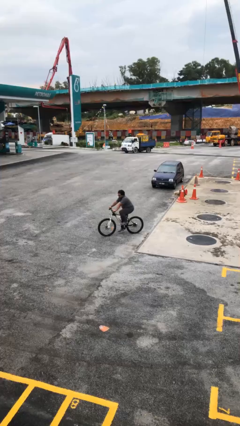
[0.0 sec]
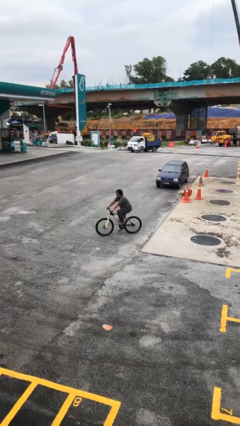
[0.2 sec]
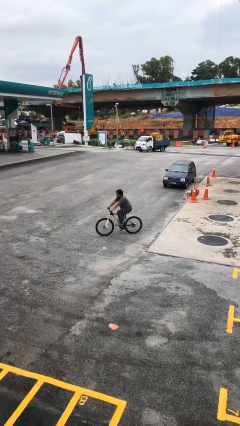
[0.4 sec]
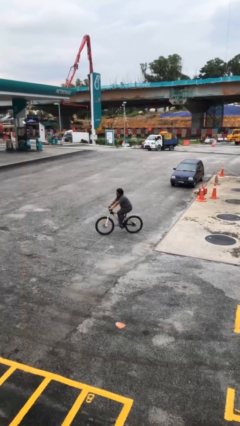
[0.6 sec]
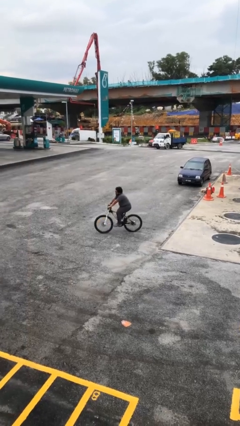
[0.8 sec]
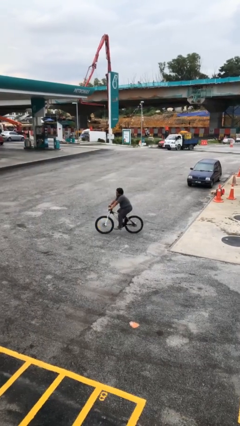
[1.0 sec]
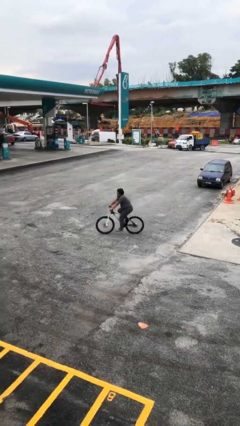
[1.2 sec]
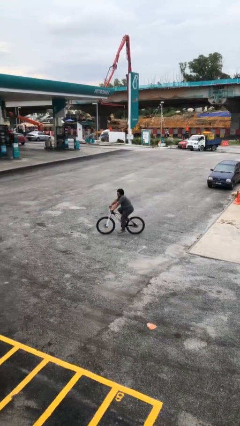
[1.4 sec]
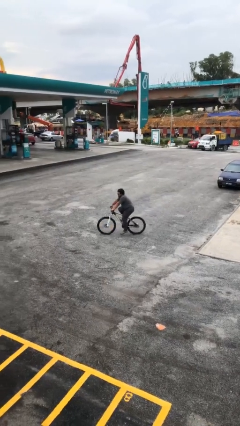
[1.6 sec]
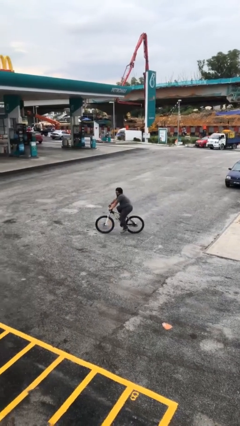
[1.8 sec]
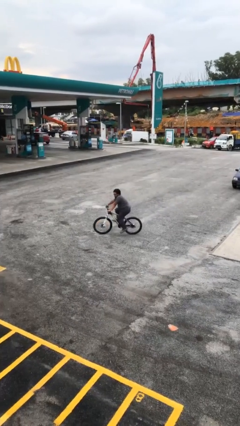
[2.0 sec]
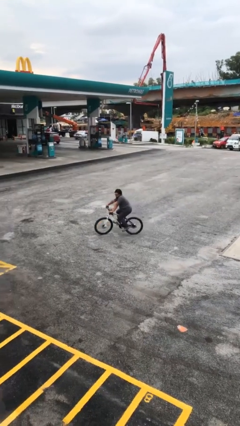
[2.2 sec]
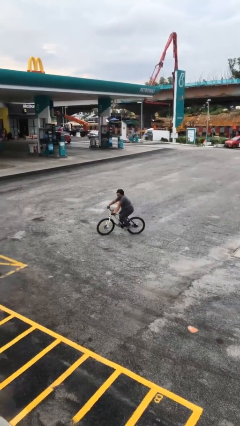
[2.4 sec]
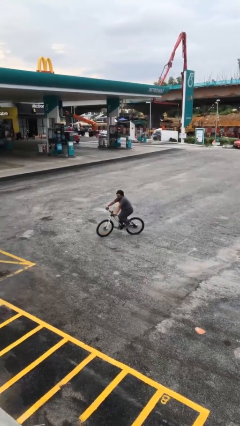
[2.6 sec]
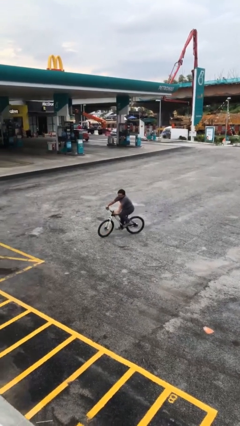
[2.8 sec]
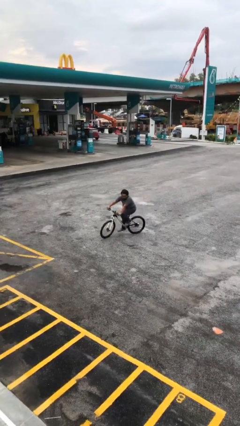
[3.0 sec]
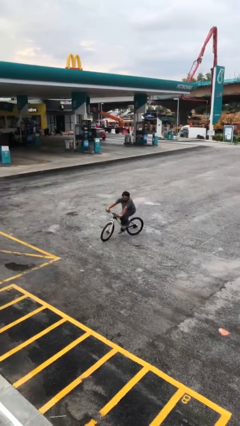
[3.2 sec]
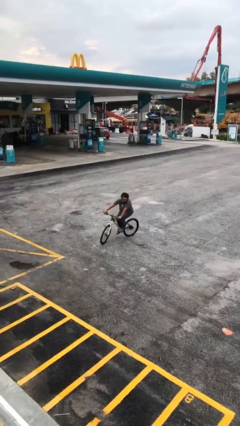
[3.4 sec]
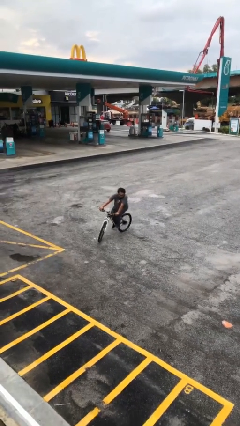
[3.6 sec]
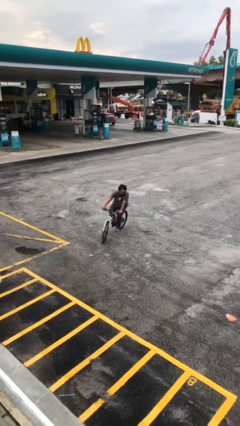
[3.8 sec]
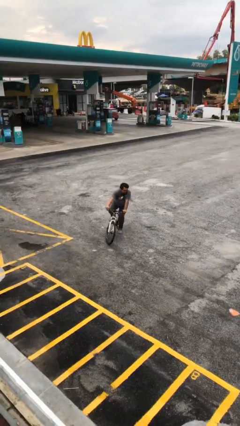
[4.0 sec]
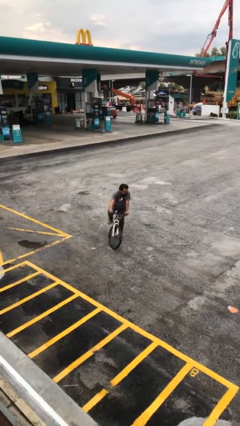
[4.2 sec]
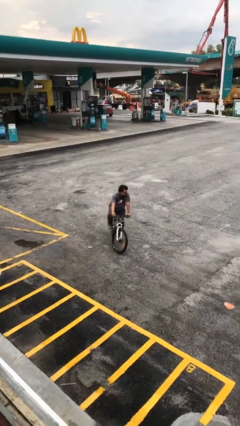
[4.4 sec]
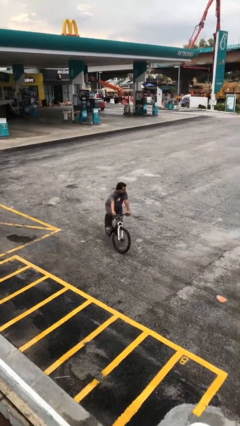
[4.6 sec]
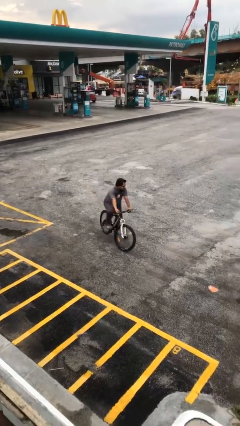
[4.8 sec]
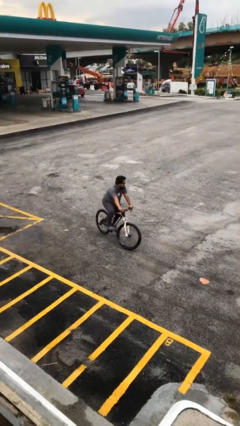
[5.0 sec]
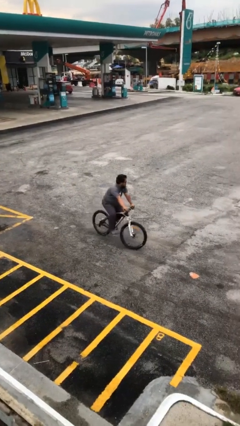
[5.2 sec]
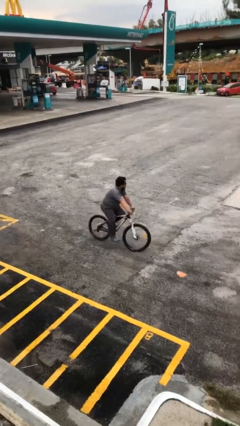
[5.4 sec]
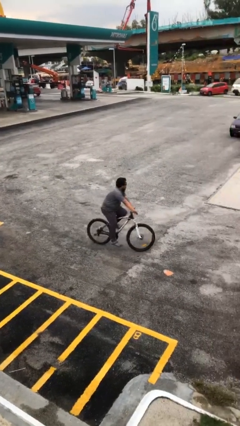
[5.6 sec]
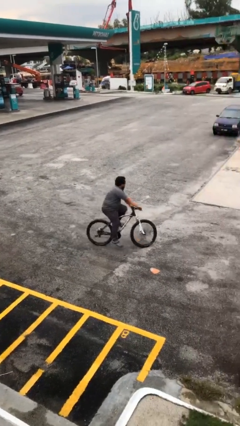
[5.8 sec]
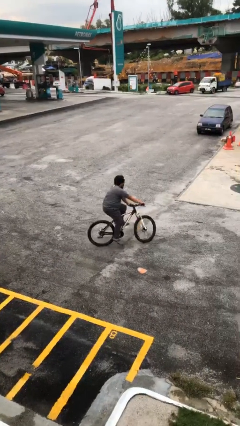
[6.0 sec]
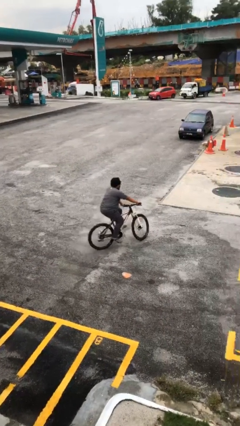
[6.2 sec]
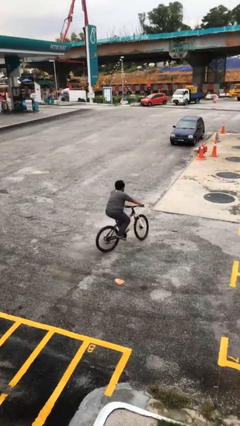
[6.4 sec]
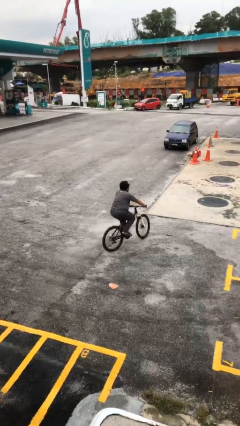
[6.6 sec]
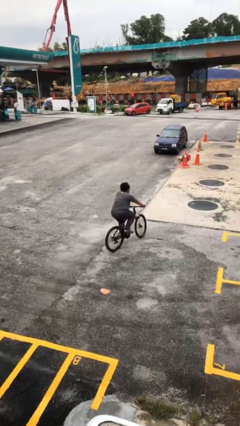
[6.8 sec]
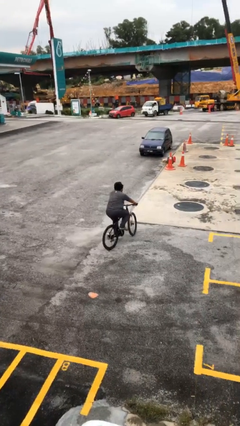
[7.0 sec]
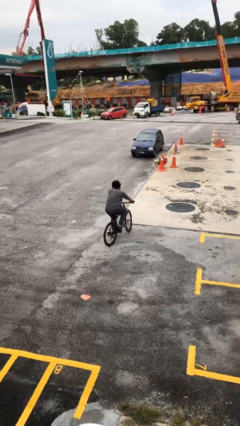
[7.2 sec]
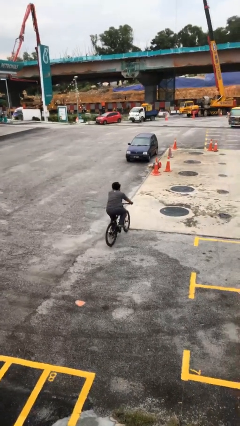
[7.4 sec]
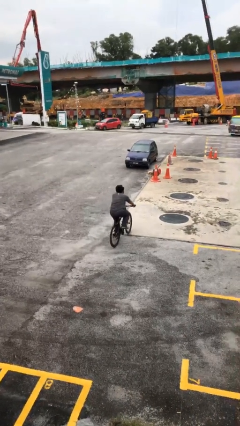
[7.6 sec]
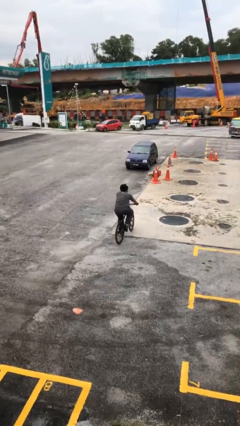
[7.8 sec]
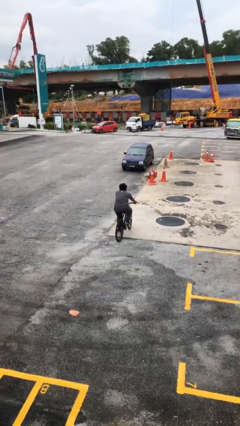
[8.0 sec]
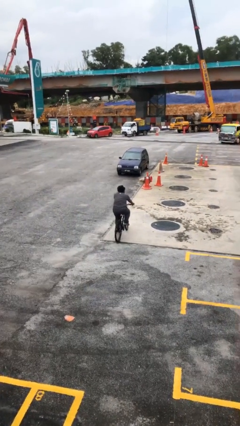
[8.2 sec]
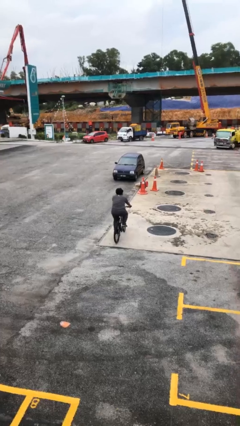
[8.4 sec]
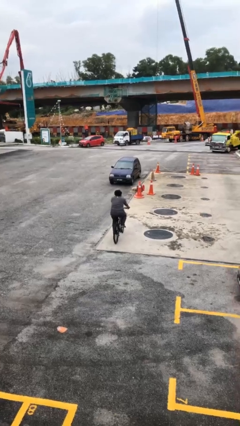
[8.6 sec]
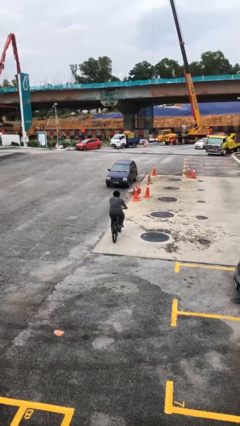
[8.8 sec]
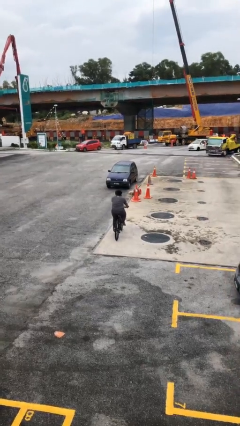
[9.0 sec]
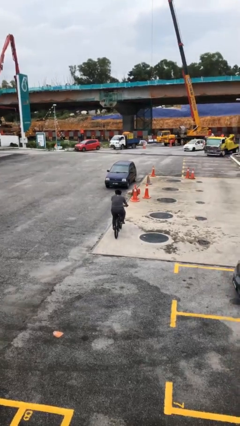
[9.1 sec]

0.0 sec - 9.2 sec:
person rides bicycle

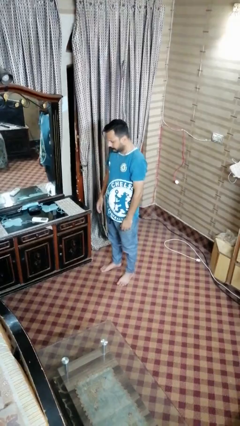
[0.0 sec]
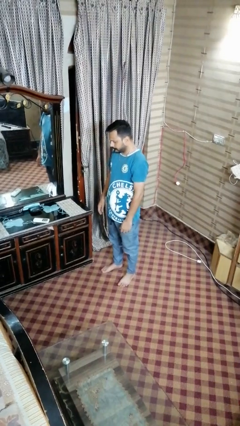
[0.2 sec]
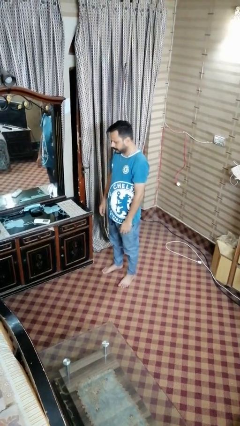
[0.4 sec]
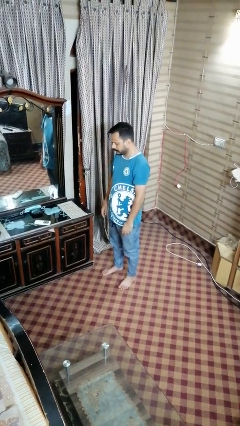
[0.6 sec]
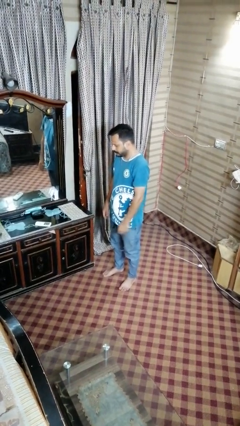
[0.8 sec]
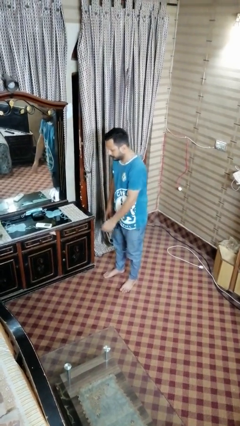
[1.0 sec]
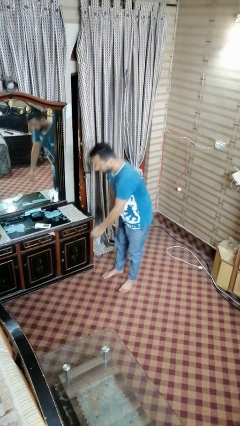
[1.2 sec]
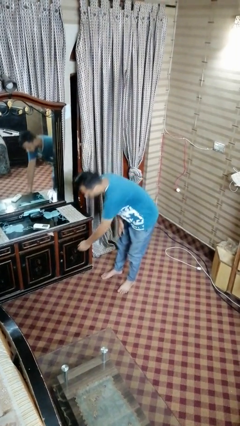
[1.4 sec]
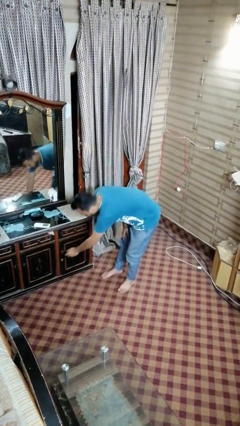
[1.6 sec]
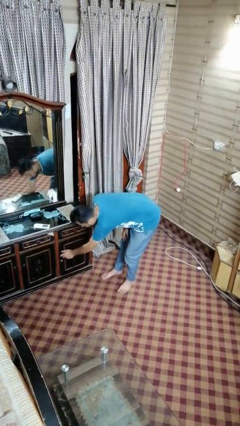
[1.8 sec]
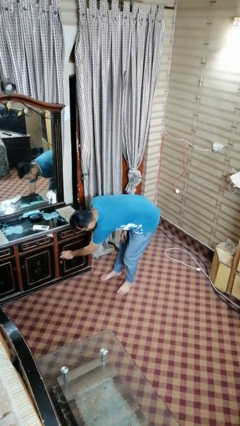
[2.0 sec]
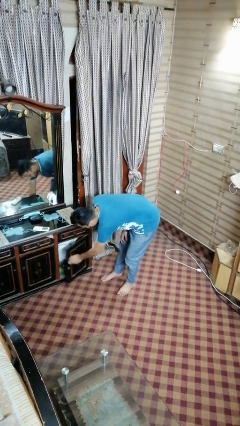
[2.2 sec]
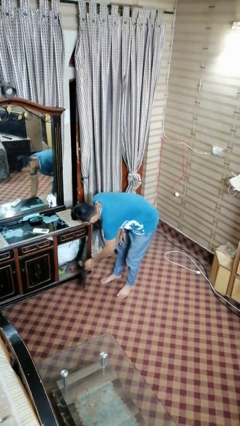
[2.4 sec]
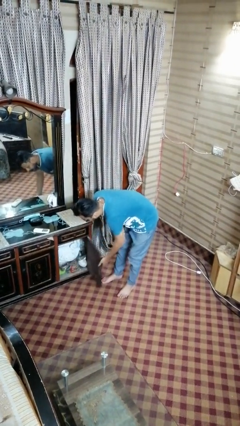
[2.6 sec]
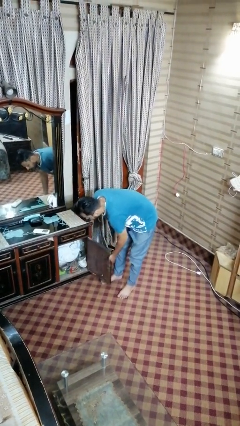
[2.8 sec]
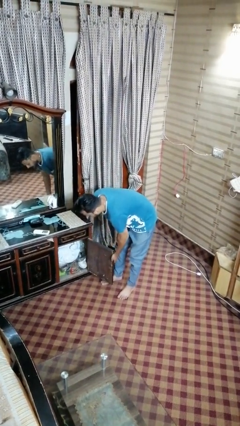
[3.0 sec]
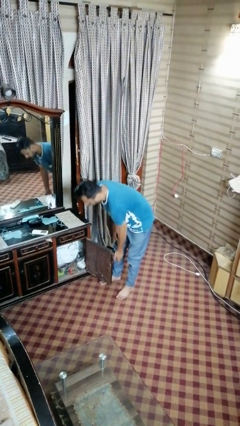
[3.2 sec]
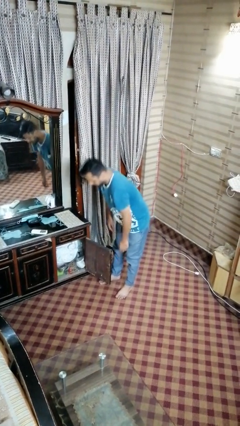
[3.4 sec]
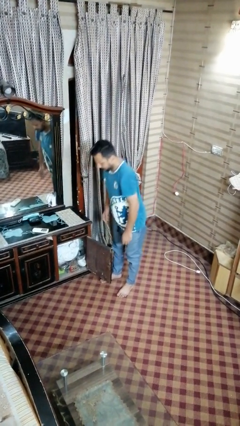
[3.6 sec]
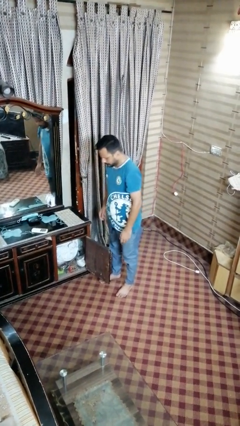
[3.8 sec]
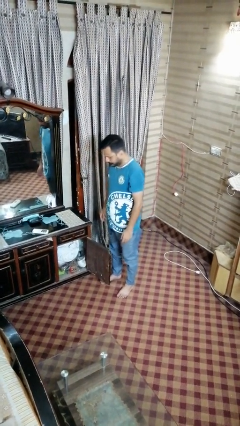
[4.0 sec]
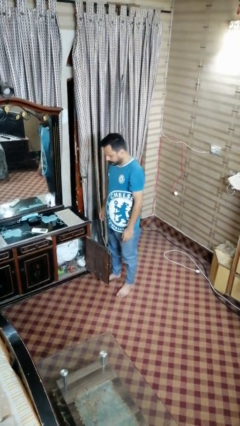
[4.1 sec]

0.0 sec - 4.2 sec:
person opens dresser drawer

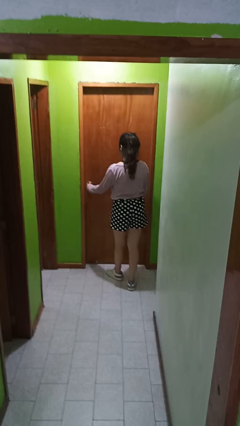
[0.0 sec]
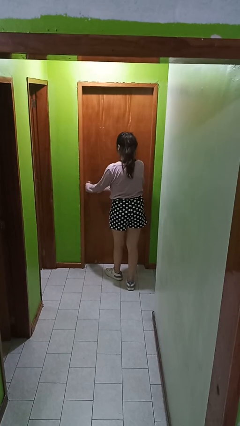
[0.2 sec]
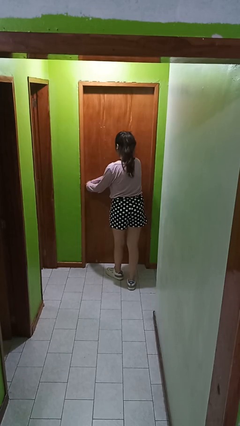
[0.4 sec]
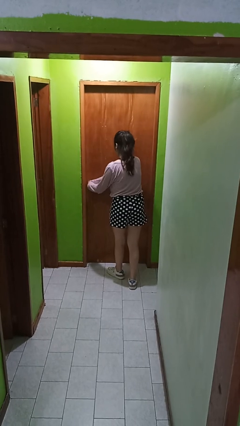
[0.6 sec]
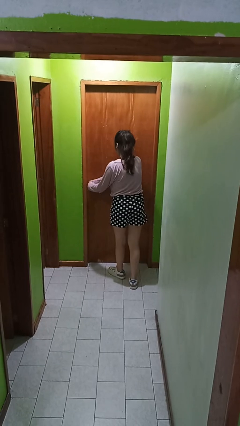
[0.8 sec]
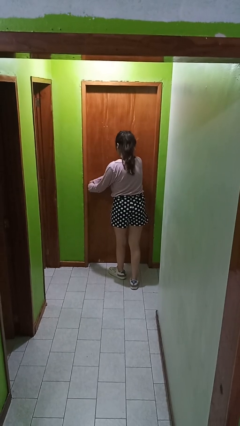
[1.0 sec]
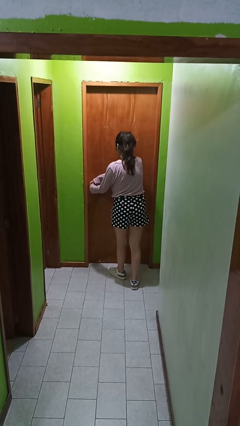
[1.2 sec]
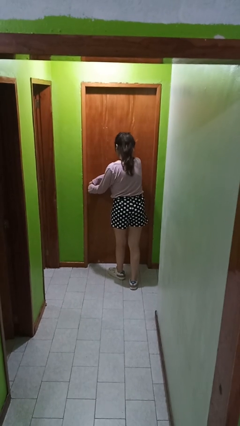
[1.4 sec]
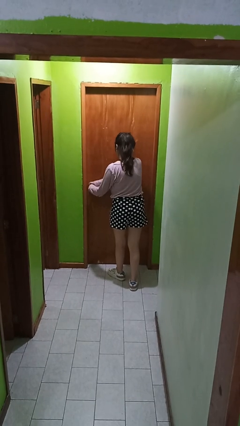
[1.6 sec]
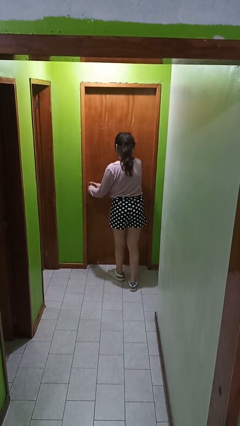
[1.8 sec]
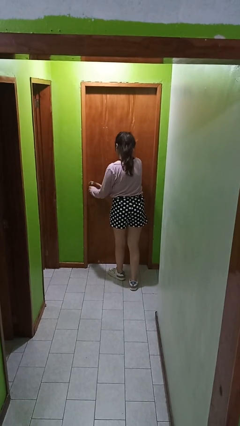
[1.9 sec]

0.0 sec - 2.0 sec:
person locks door with keys

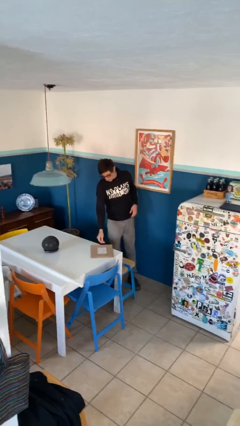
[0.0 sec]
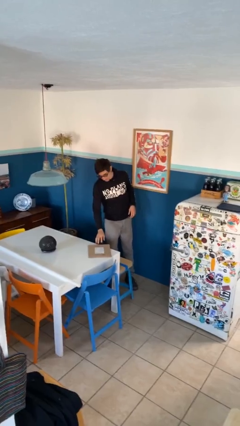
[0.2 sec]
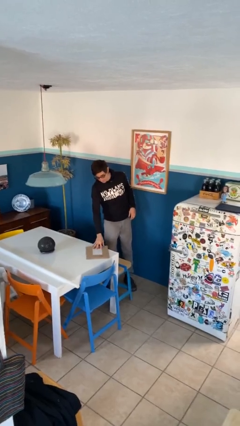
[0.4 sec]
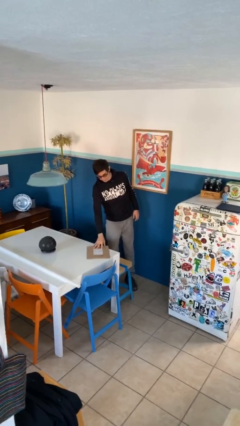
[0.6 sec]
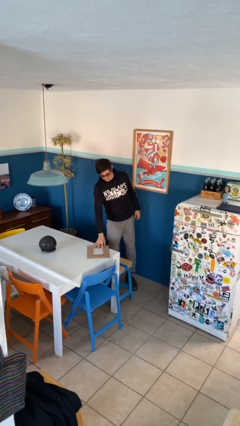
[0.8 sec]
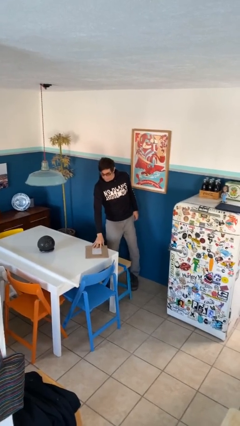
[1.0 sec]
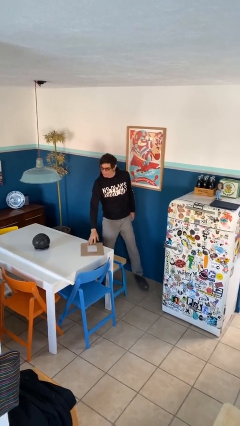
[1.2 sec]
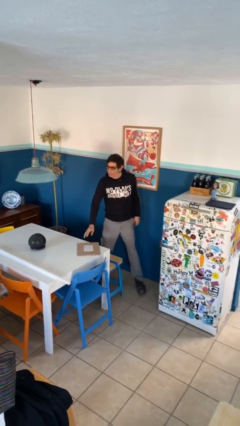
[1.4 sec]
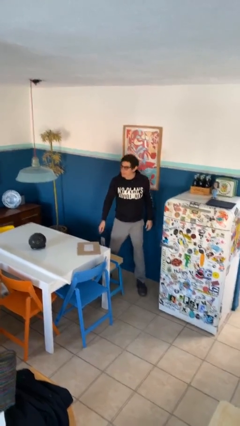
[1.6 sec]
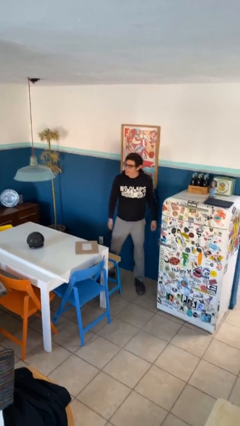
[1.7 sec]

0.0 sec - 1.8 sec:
person puts down object on table

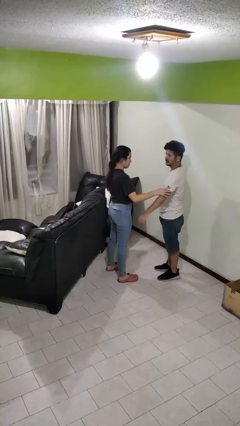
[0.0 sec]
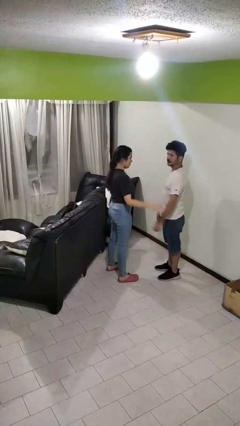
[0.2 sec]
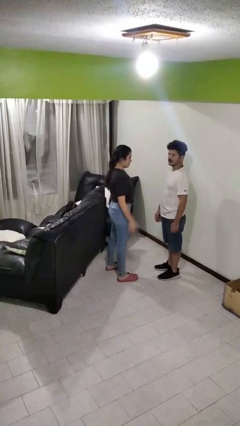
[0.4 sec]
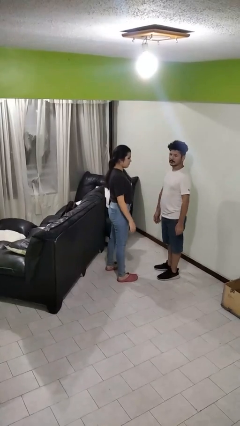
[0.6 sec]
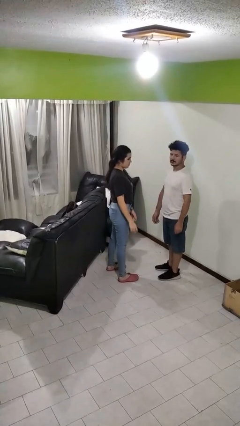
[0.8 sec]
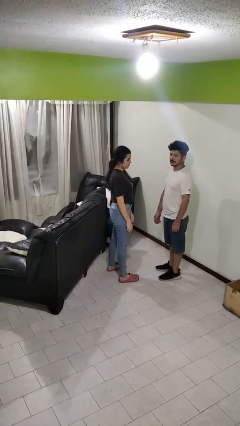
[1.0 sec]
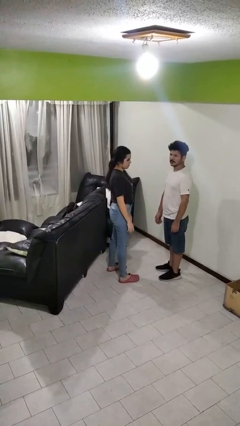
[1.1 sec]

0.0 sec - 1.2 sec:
person grabs person by bicep
